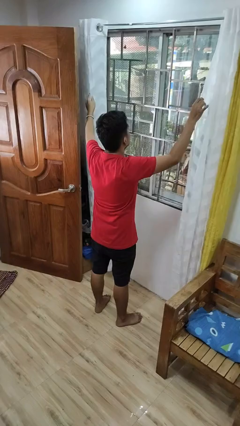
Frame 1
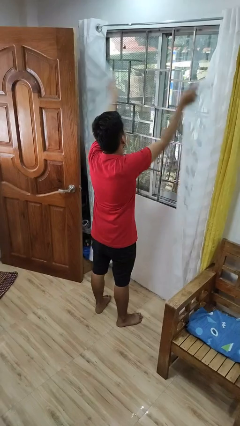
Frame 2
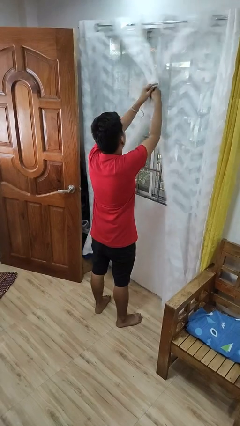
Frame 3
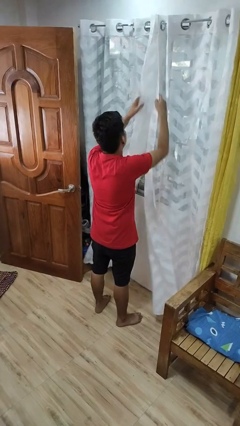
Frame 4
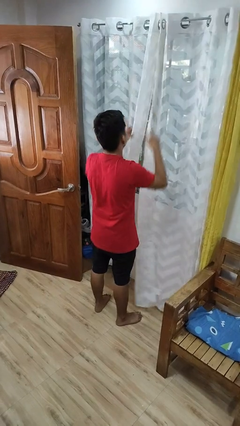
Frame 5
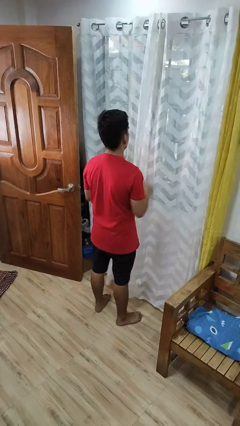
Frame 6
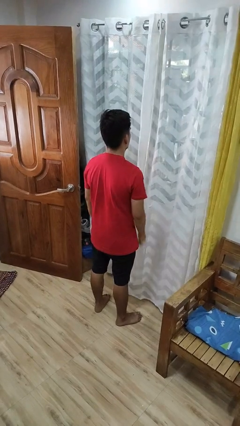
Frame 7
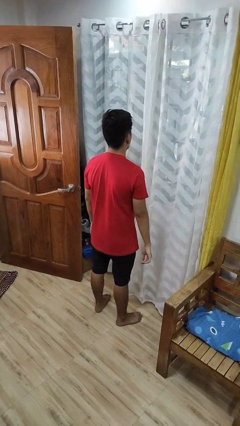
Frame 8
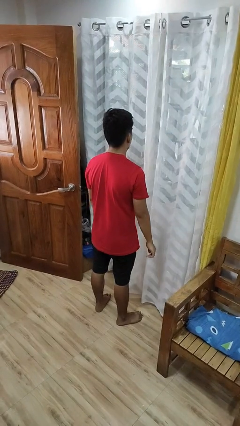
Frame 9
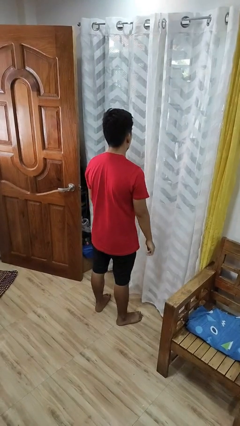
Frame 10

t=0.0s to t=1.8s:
person closes curtains

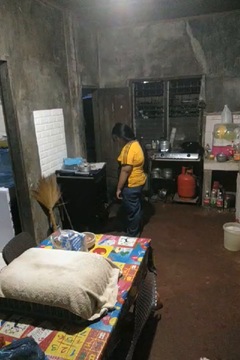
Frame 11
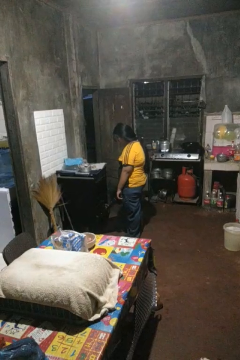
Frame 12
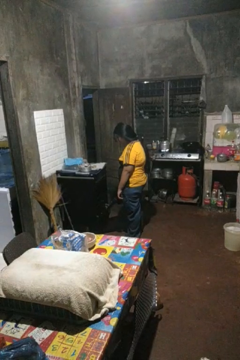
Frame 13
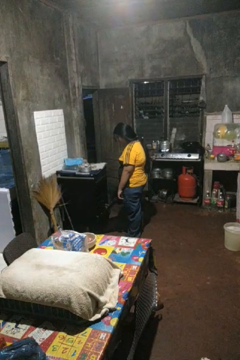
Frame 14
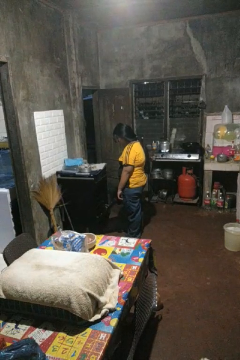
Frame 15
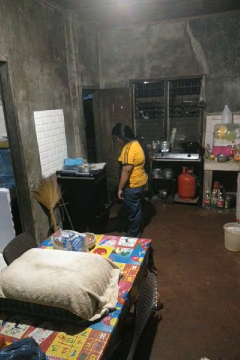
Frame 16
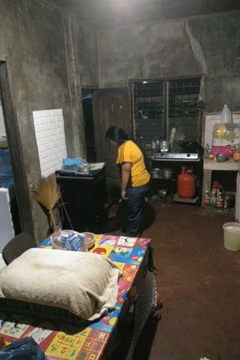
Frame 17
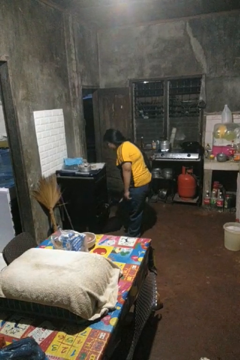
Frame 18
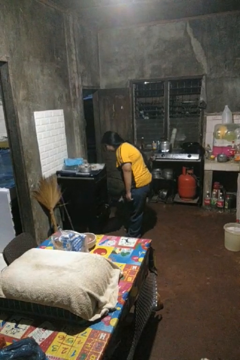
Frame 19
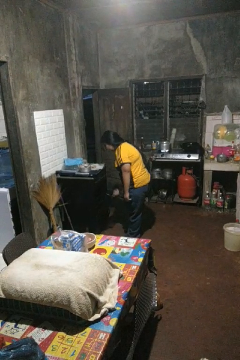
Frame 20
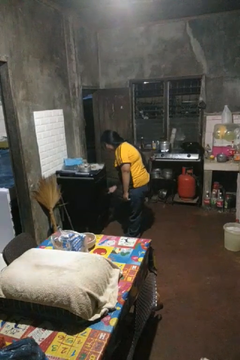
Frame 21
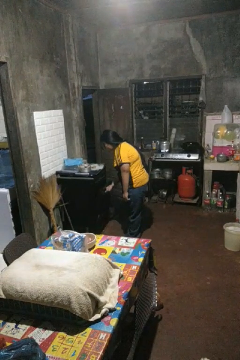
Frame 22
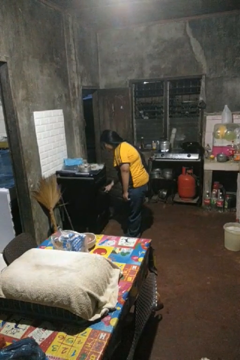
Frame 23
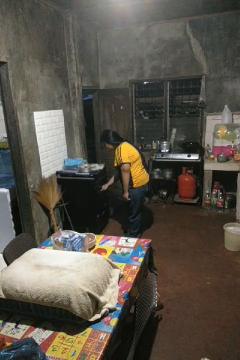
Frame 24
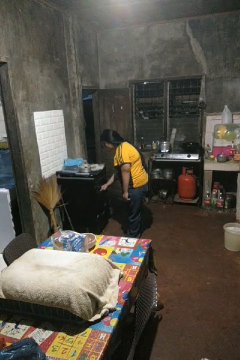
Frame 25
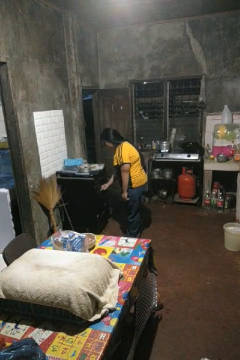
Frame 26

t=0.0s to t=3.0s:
person closes oven door

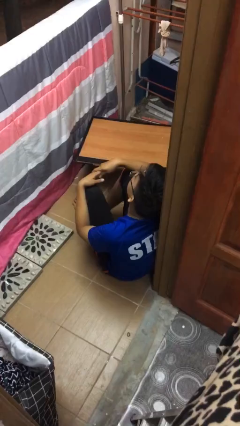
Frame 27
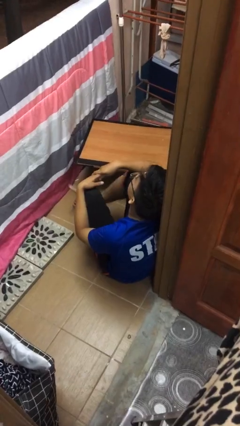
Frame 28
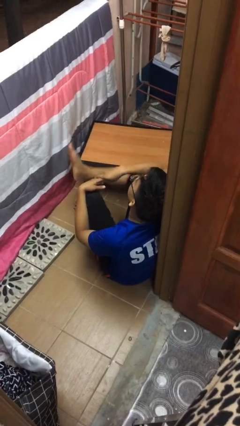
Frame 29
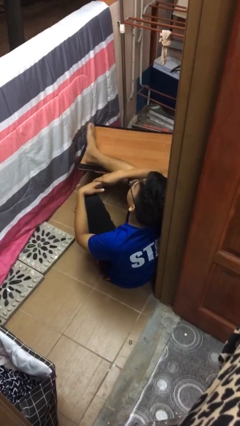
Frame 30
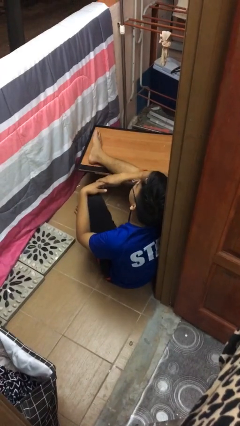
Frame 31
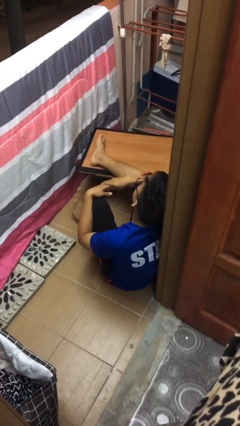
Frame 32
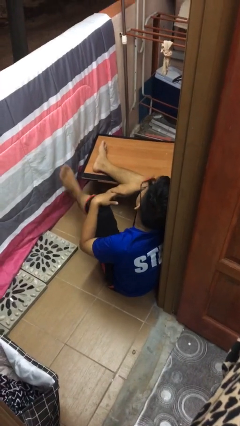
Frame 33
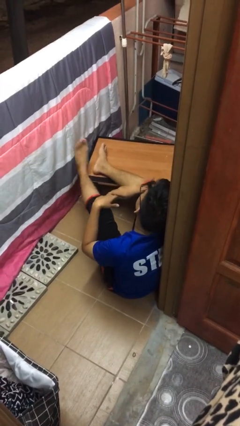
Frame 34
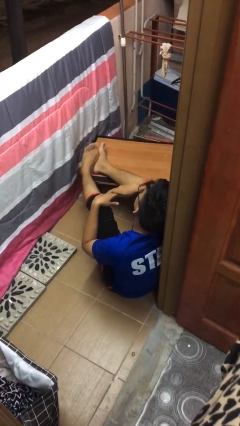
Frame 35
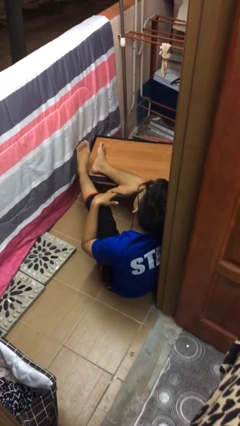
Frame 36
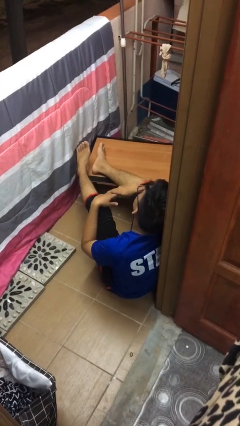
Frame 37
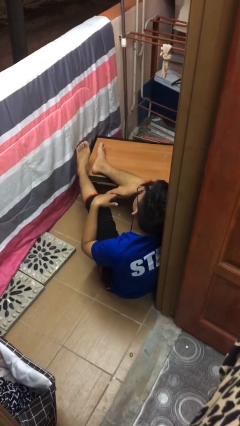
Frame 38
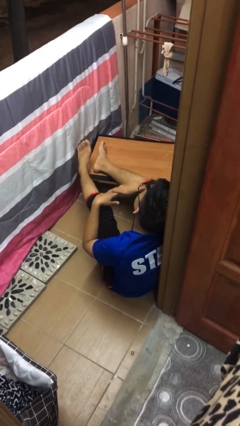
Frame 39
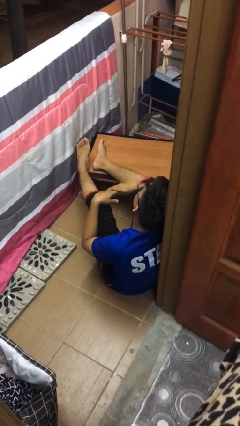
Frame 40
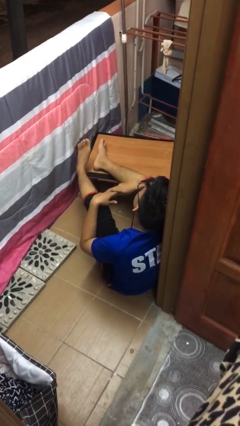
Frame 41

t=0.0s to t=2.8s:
person puts feet up

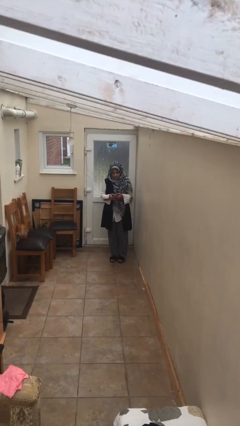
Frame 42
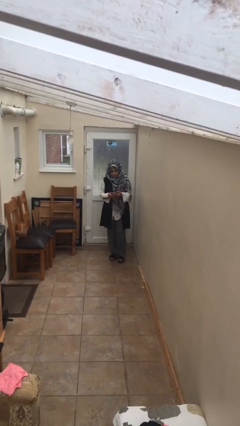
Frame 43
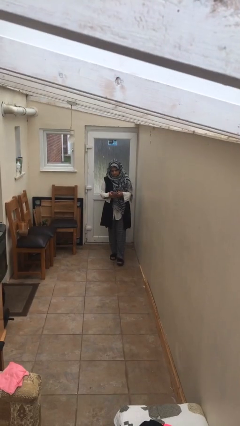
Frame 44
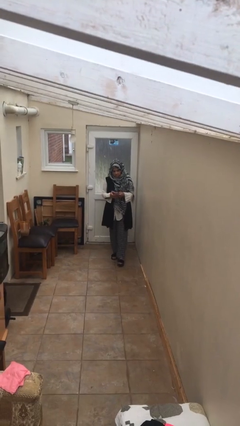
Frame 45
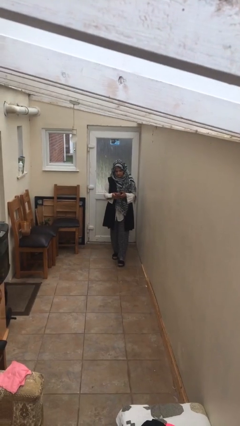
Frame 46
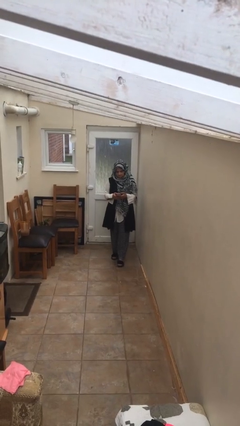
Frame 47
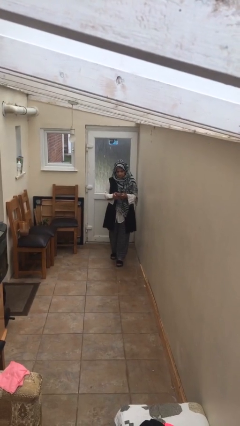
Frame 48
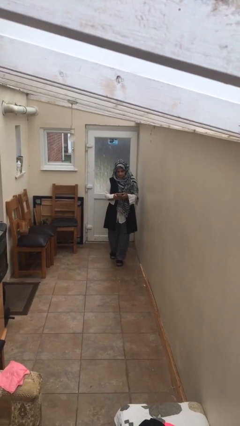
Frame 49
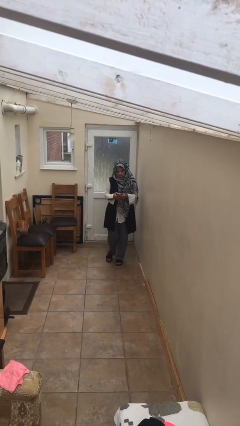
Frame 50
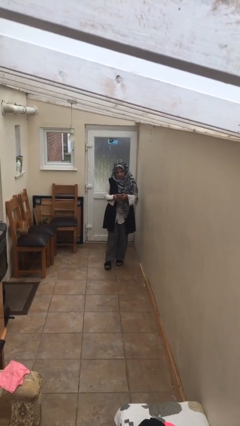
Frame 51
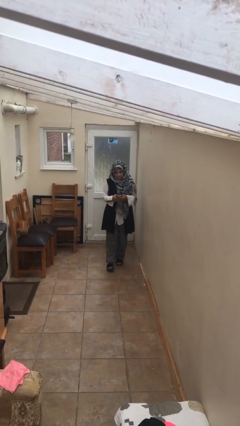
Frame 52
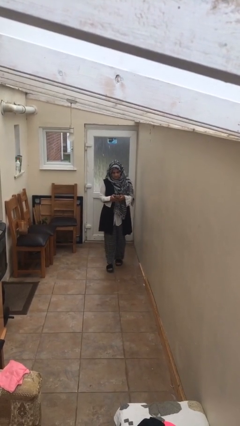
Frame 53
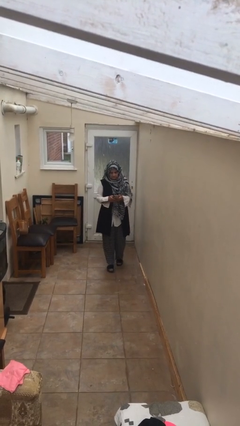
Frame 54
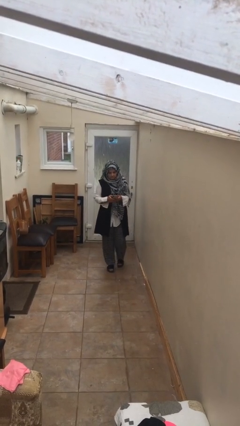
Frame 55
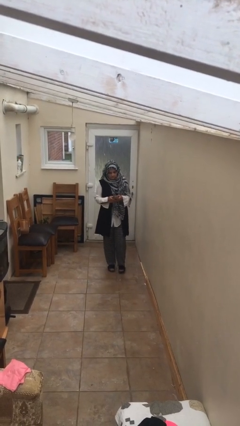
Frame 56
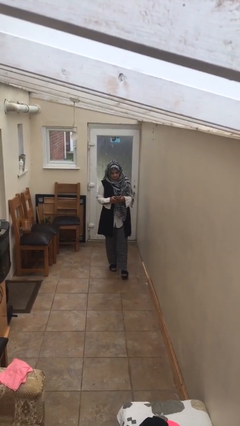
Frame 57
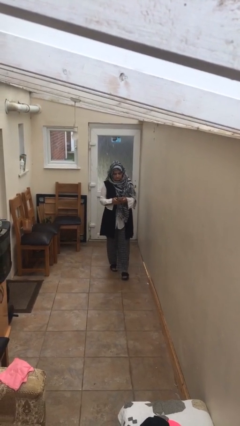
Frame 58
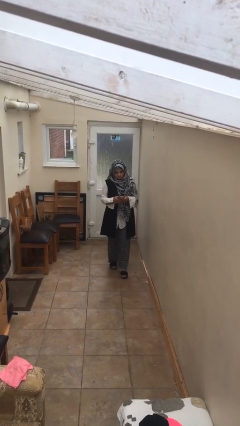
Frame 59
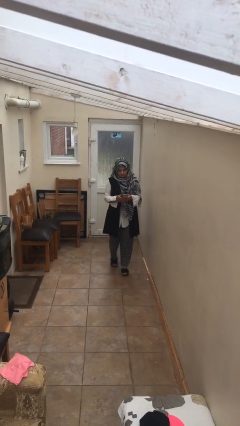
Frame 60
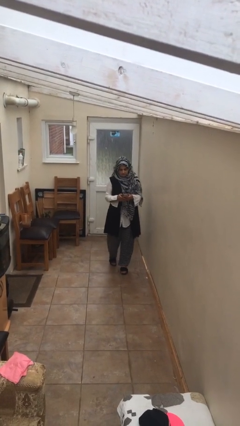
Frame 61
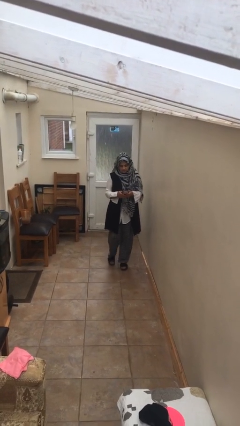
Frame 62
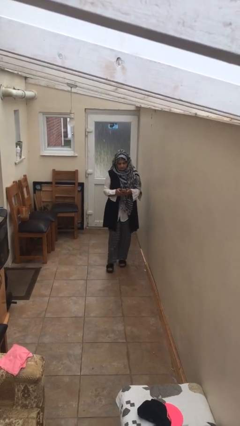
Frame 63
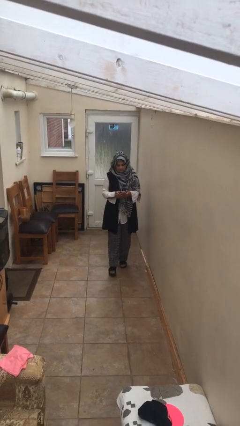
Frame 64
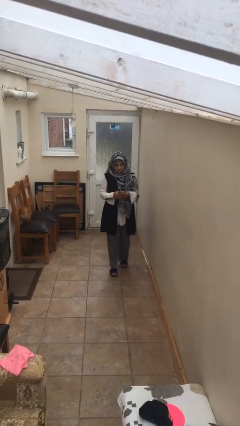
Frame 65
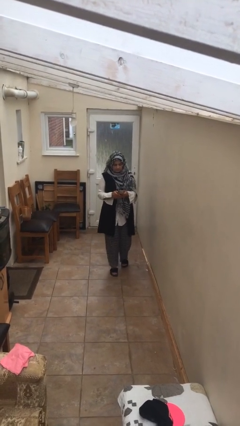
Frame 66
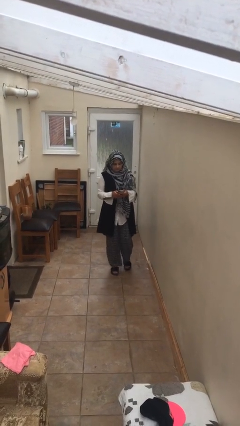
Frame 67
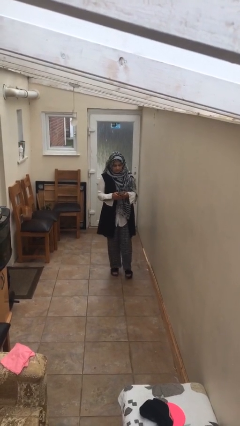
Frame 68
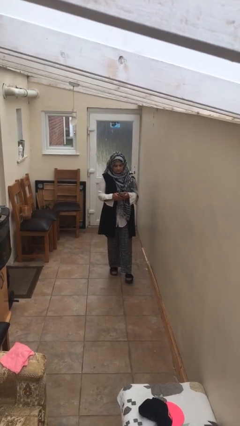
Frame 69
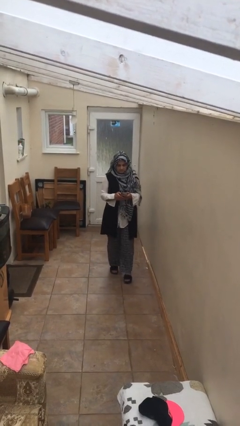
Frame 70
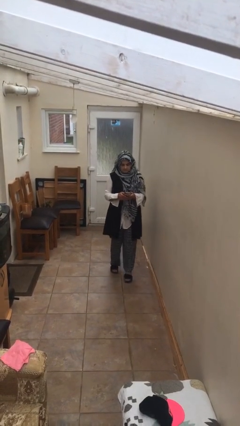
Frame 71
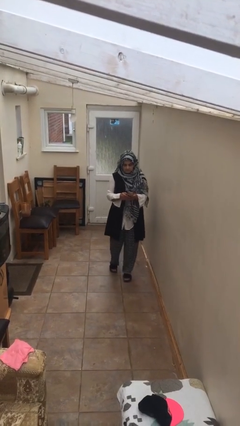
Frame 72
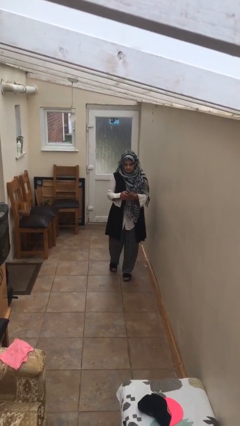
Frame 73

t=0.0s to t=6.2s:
person texts on phone

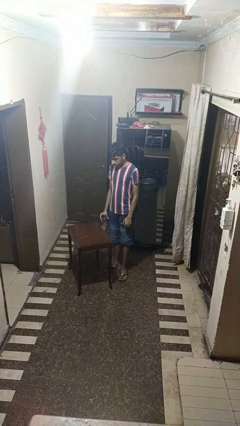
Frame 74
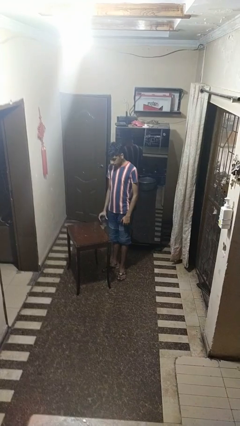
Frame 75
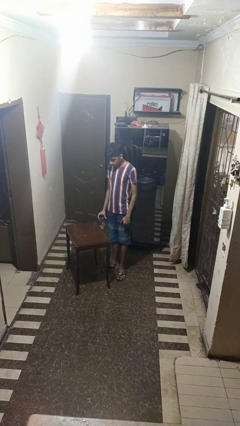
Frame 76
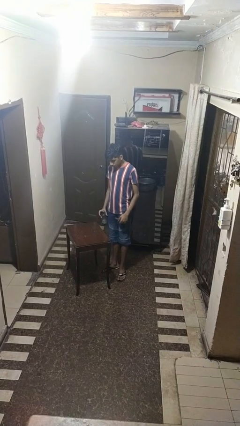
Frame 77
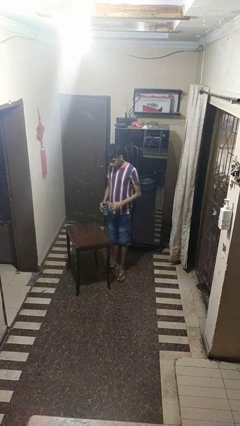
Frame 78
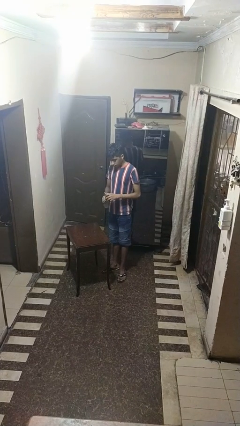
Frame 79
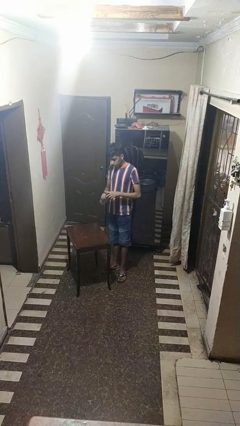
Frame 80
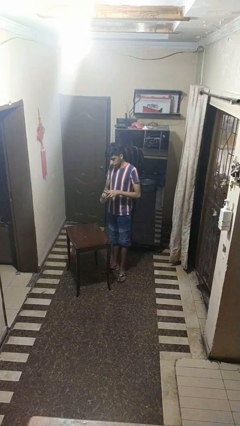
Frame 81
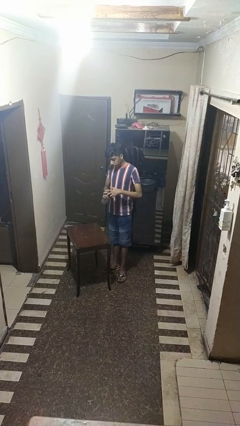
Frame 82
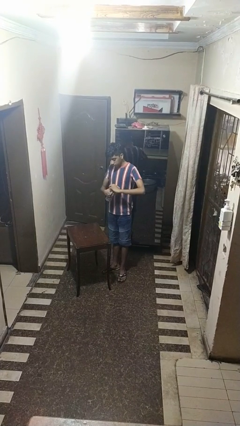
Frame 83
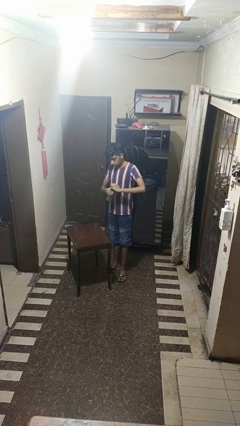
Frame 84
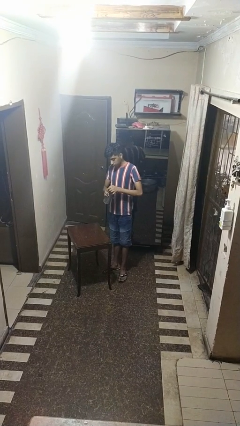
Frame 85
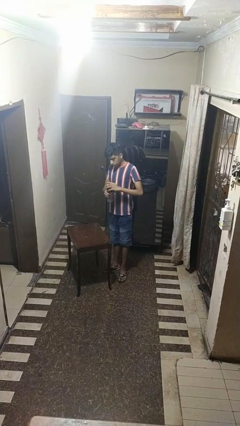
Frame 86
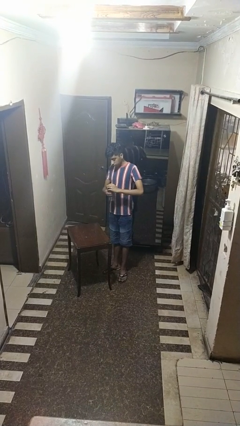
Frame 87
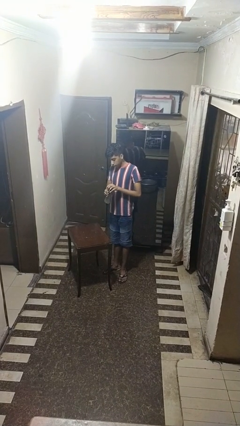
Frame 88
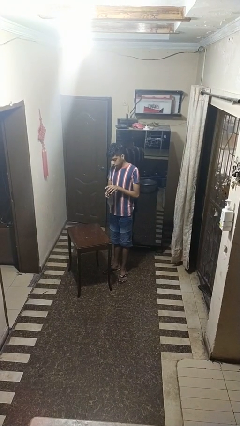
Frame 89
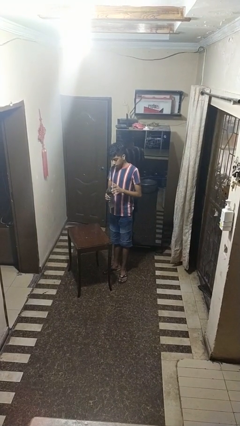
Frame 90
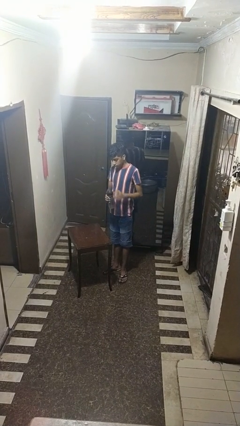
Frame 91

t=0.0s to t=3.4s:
person screws lid to bottle

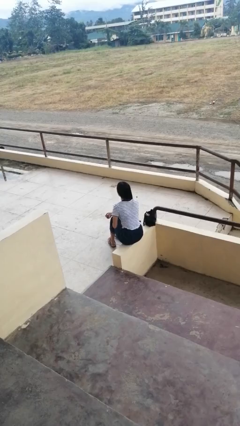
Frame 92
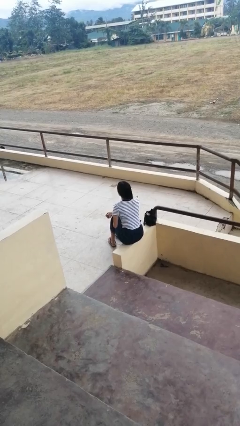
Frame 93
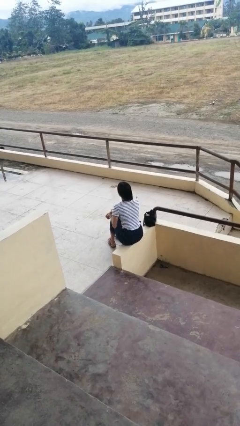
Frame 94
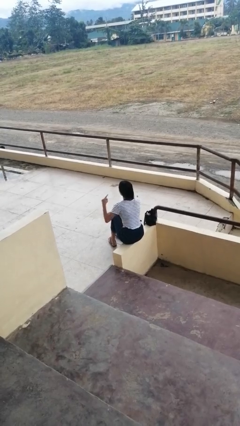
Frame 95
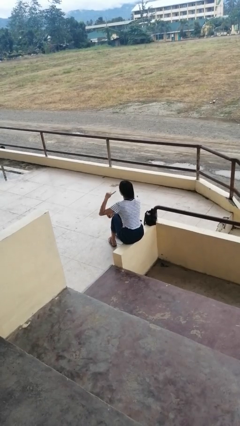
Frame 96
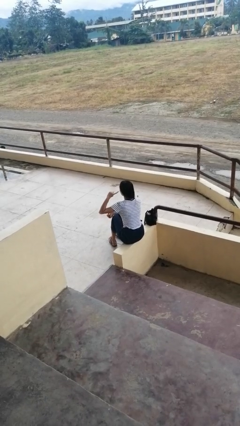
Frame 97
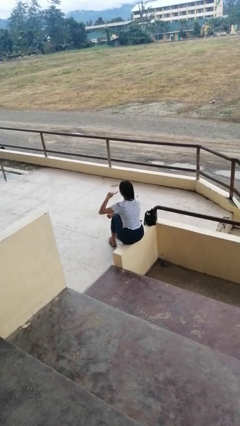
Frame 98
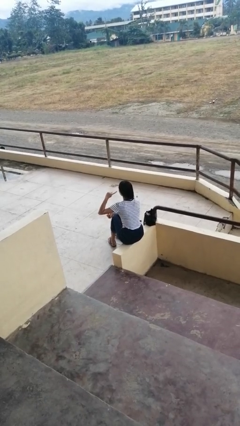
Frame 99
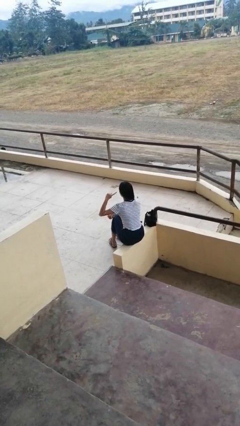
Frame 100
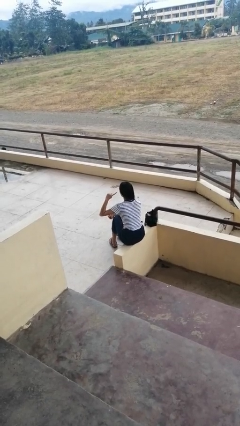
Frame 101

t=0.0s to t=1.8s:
person gestures listen closely
